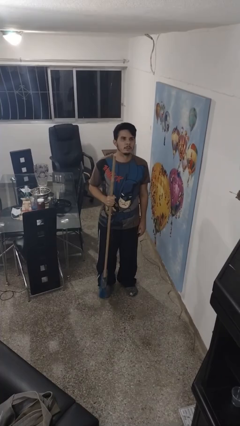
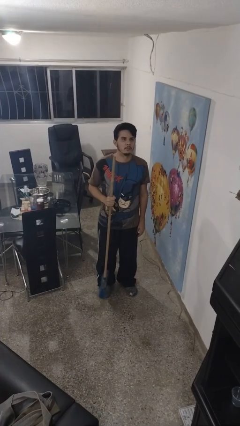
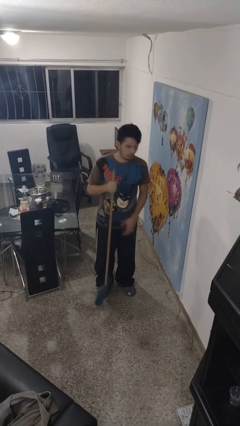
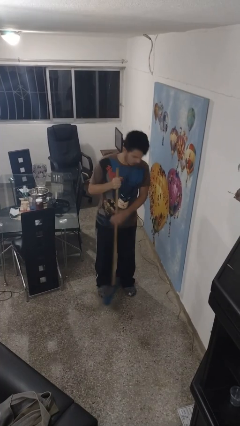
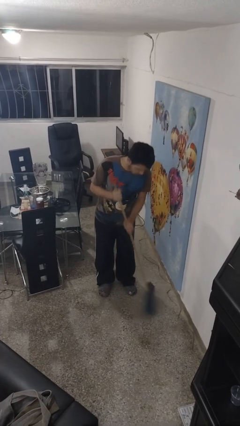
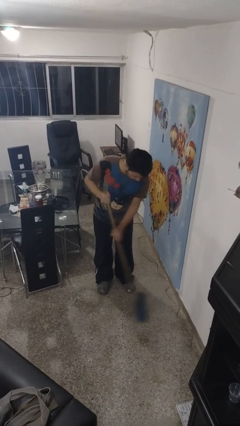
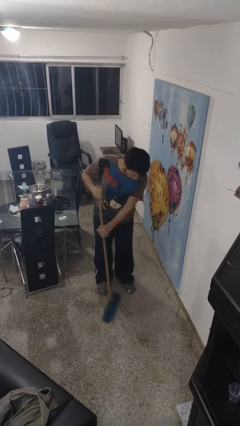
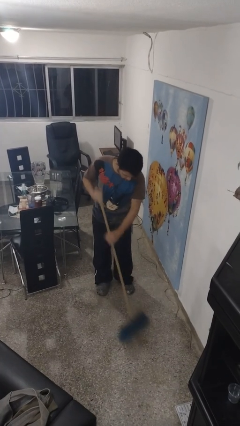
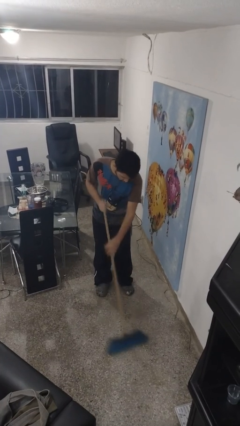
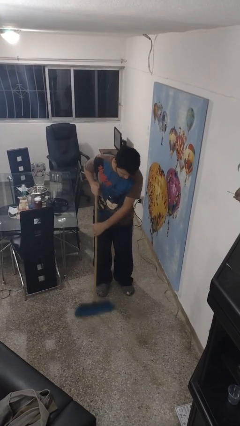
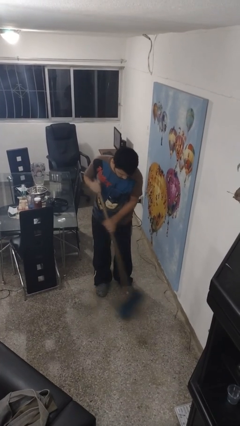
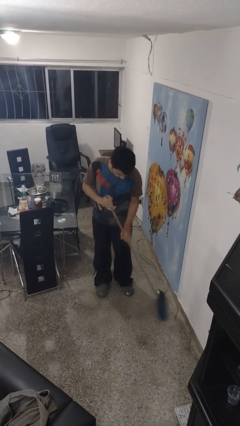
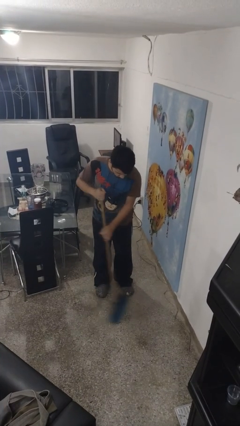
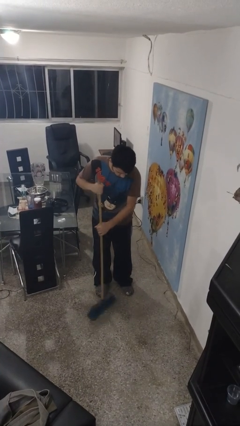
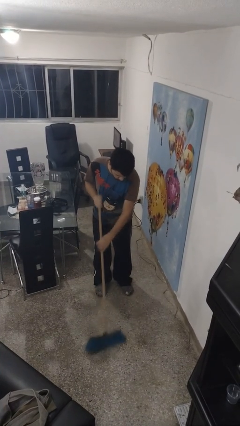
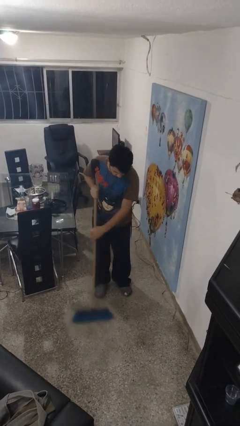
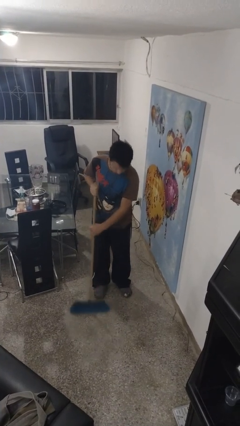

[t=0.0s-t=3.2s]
person sweeps floor

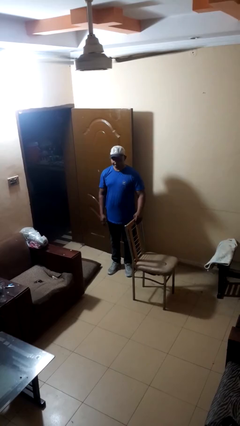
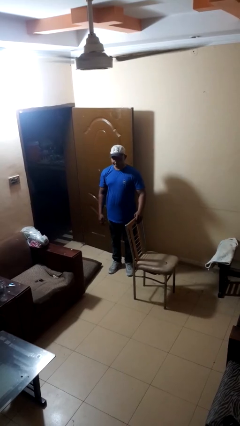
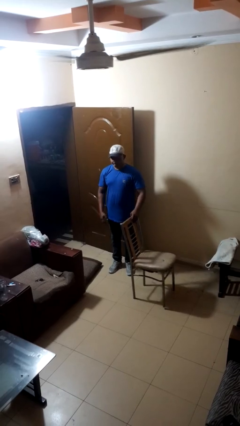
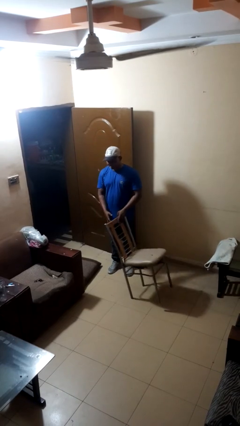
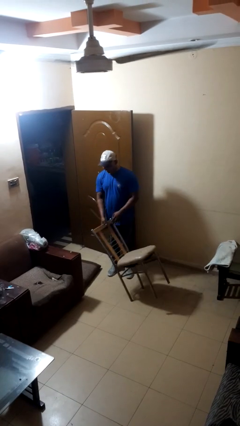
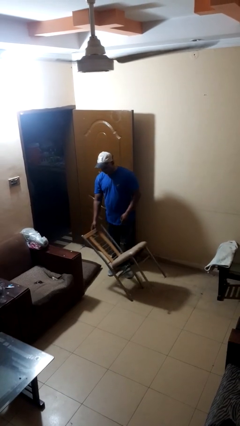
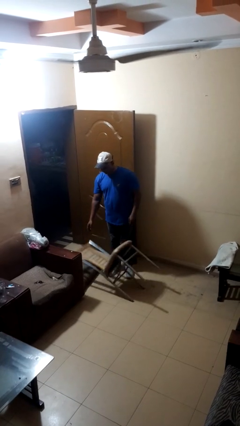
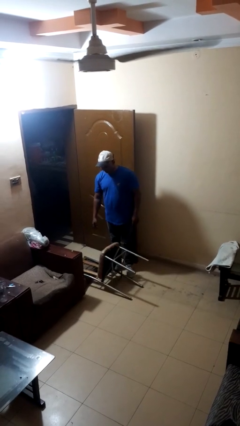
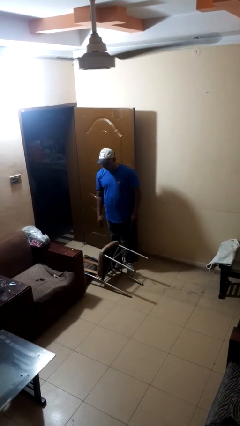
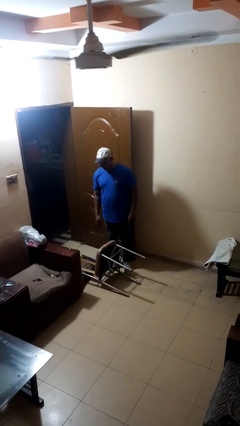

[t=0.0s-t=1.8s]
person knocks over furniture

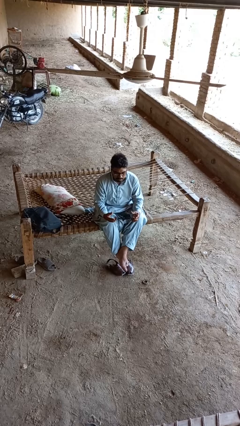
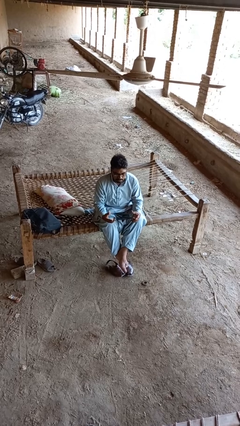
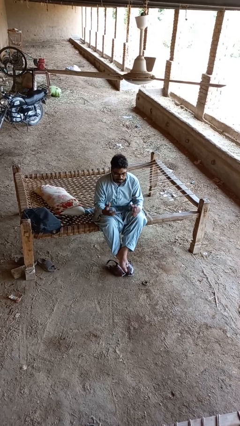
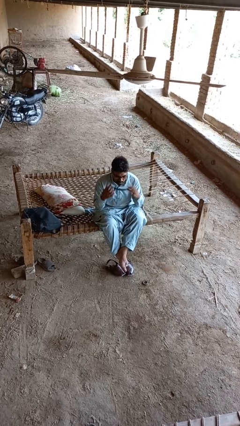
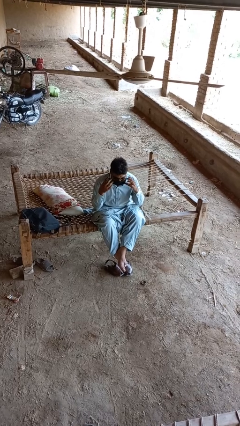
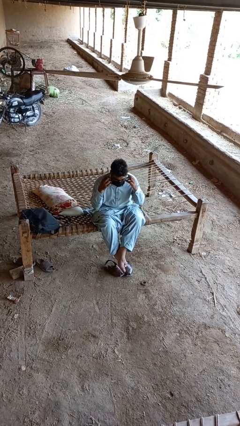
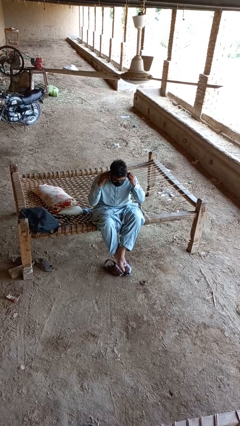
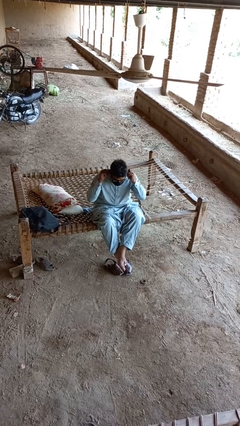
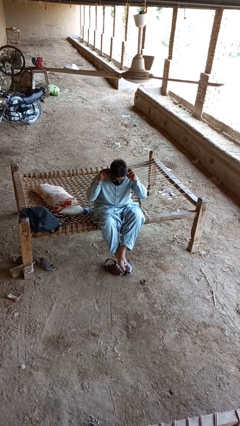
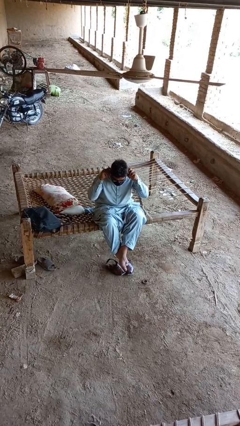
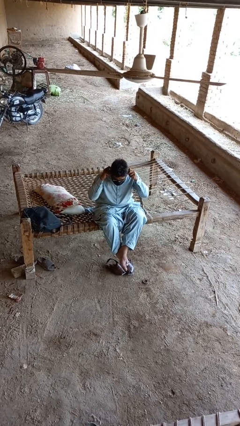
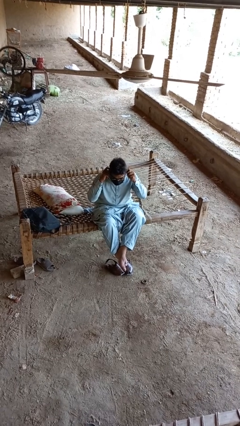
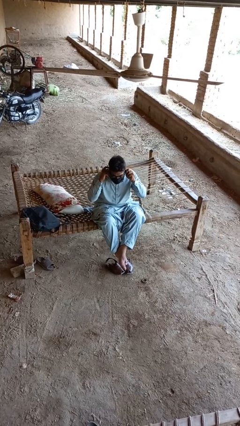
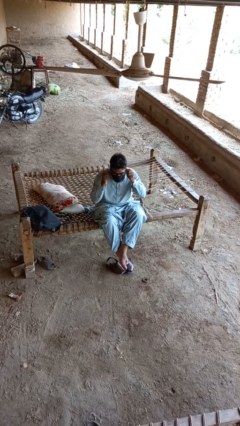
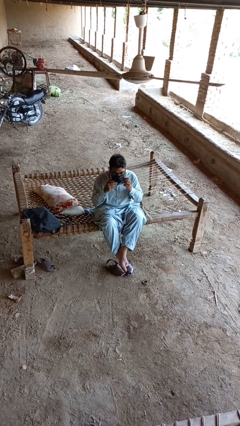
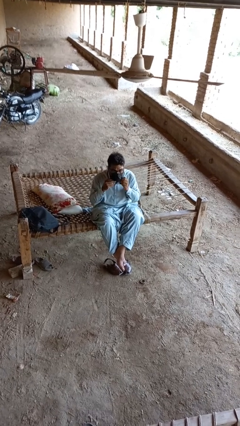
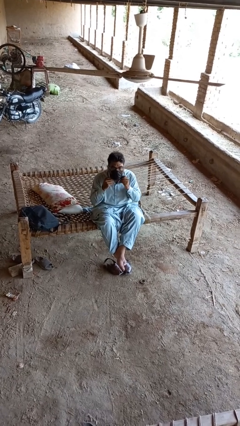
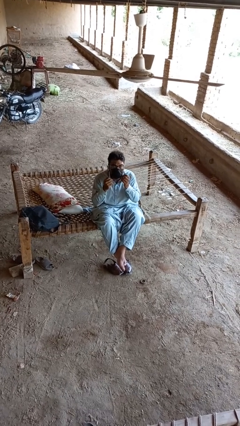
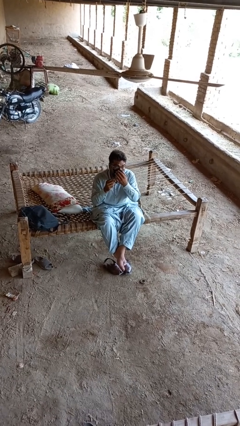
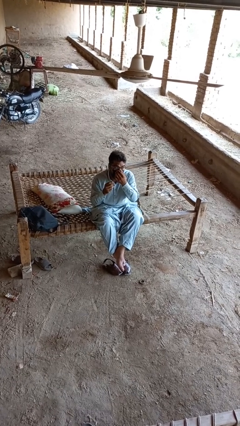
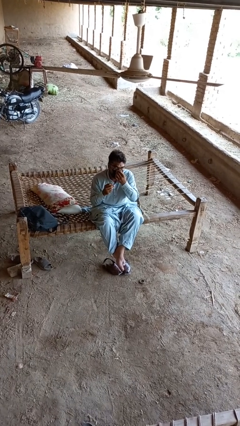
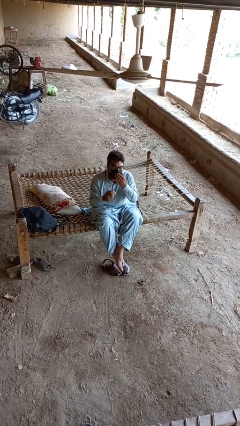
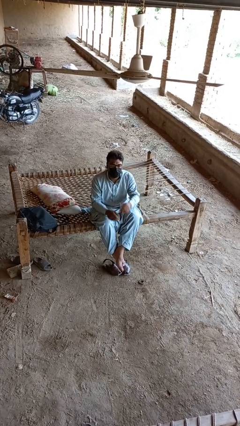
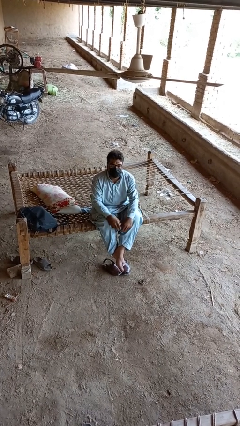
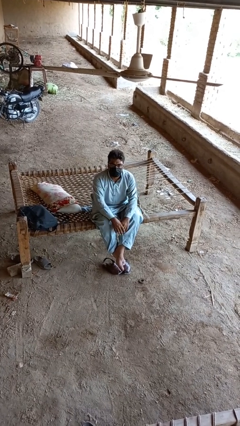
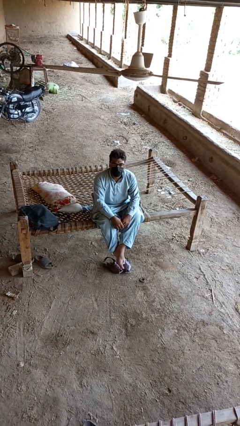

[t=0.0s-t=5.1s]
person puts on facemask

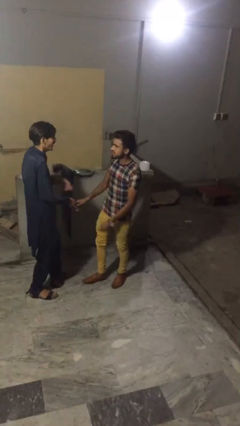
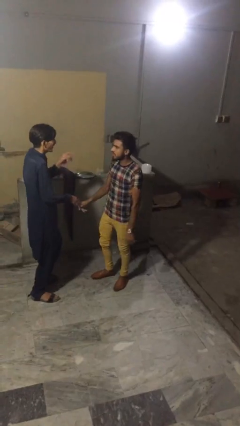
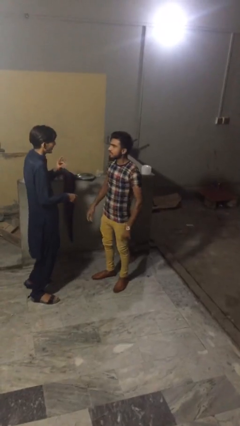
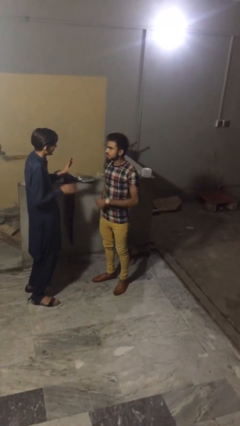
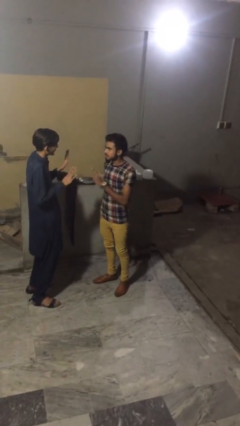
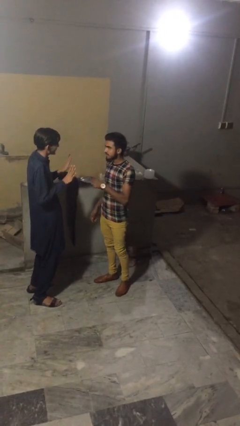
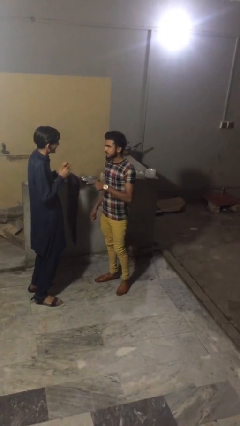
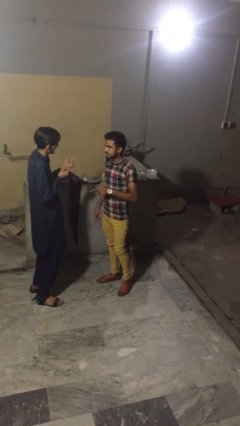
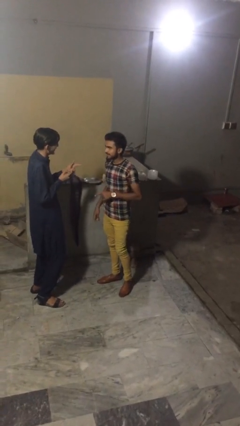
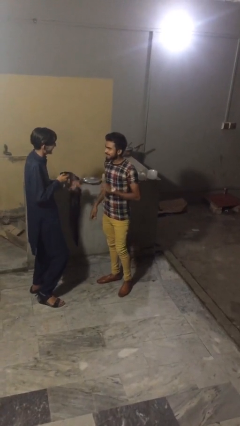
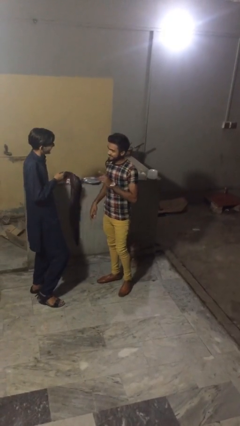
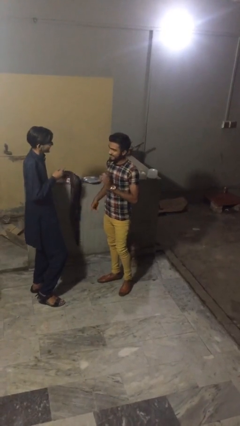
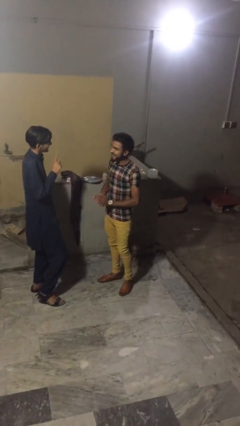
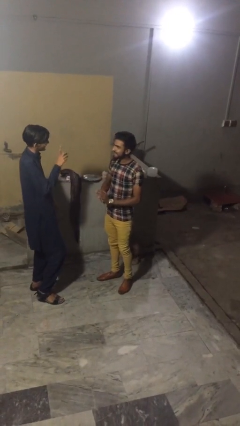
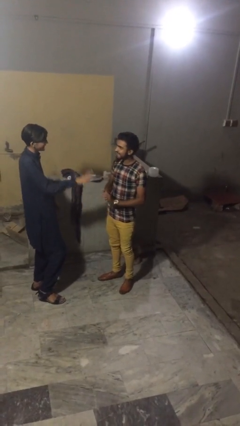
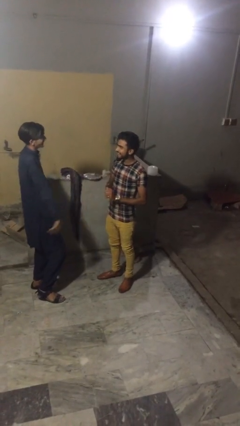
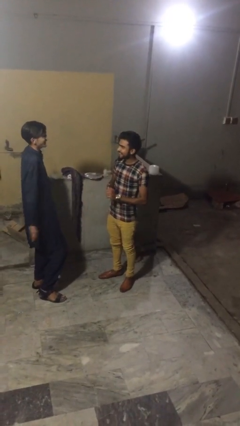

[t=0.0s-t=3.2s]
person talks to person

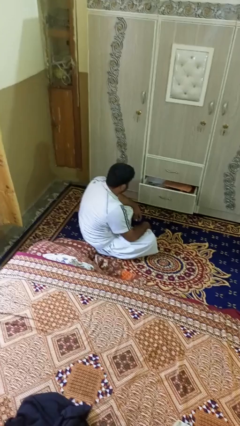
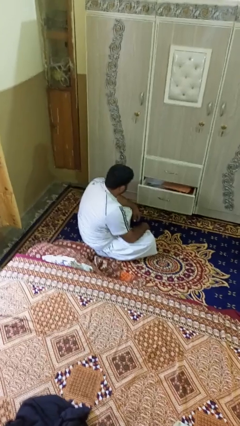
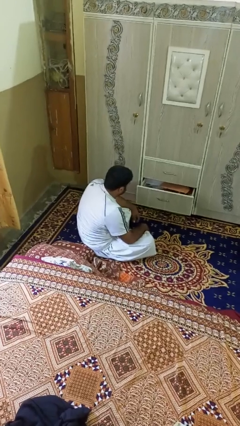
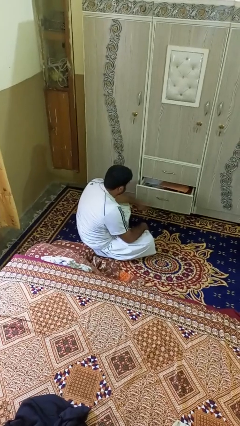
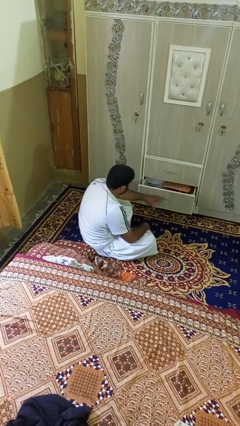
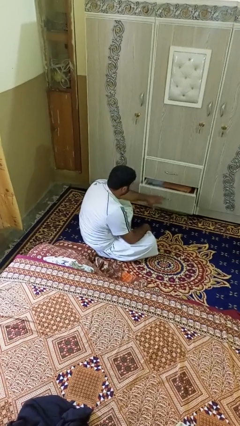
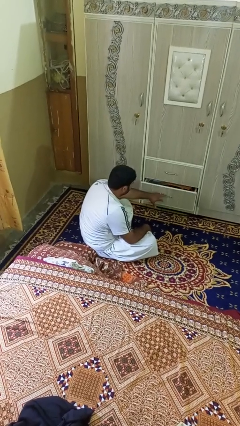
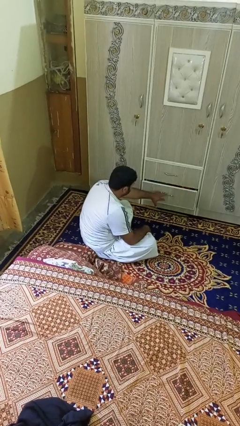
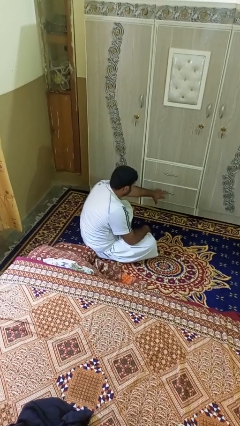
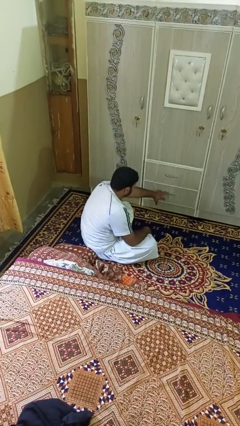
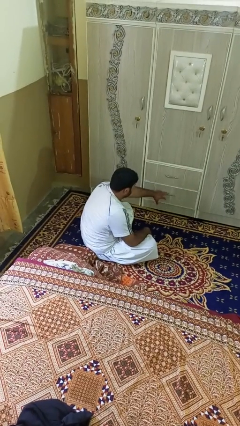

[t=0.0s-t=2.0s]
person closes dresser drawer

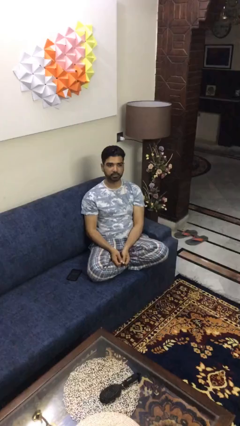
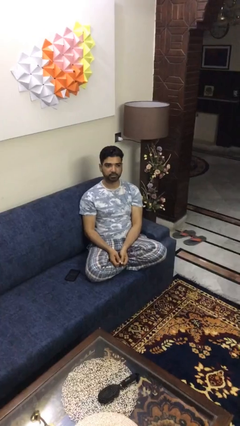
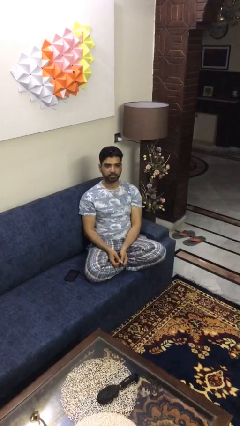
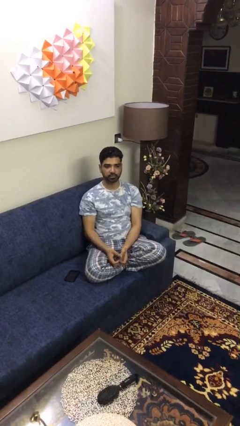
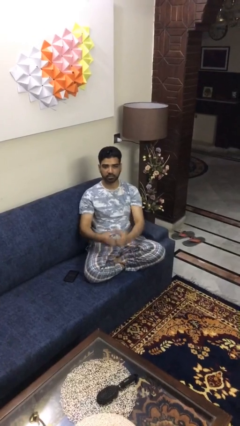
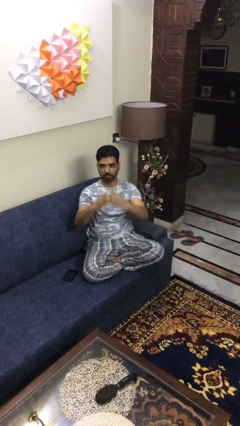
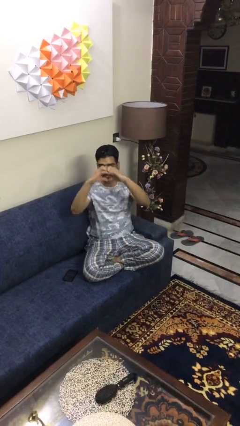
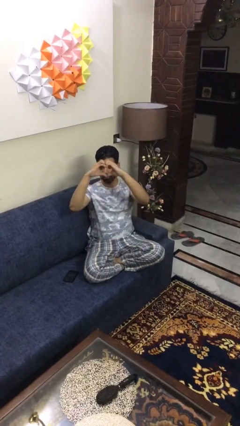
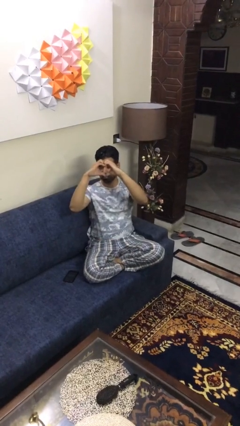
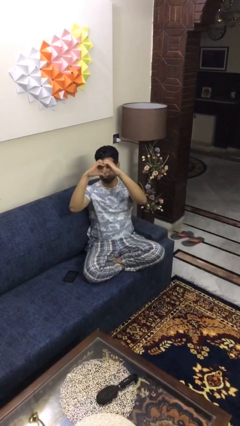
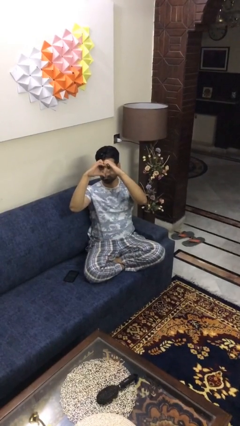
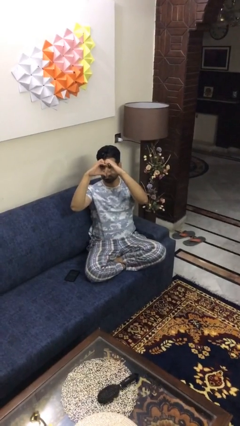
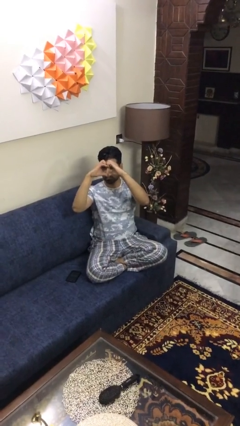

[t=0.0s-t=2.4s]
person gestures heart
